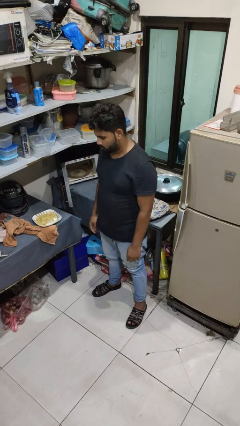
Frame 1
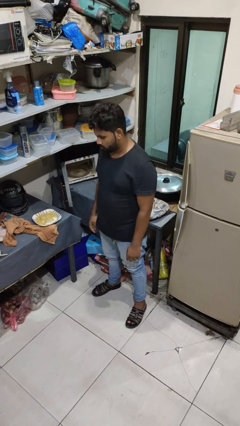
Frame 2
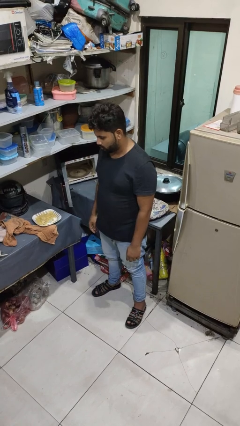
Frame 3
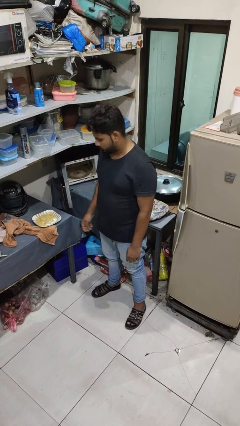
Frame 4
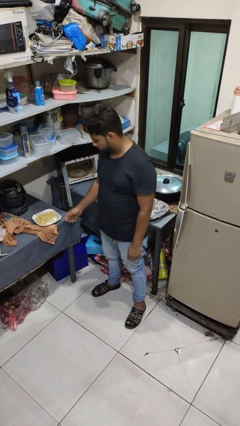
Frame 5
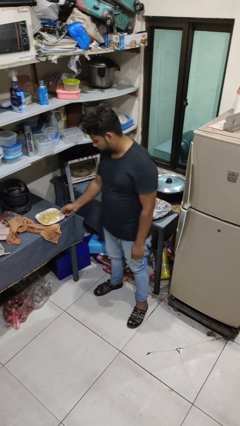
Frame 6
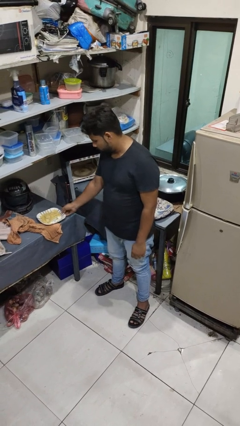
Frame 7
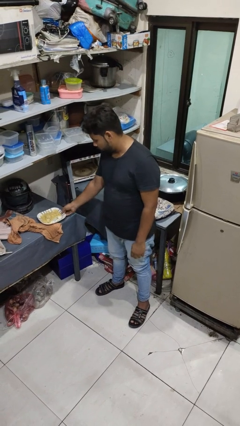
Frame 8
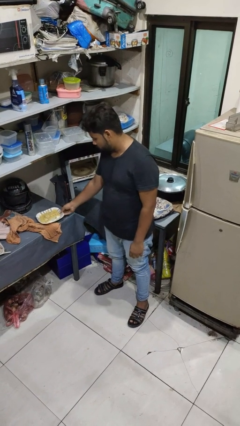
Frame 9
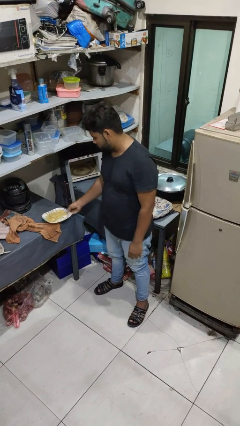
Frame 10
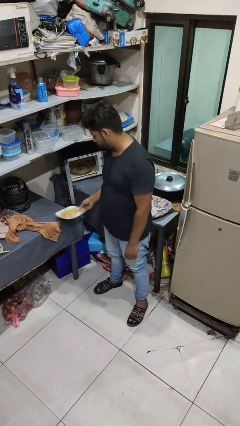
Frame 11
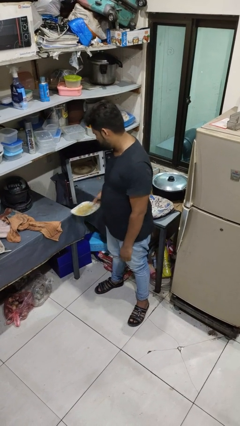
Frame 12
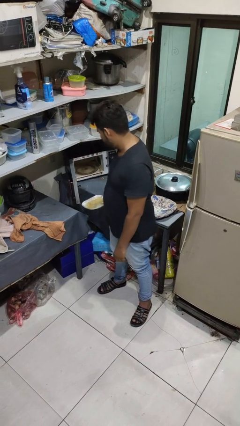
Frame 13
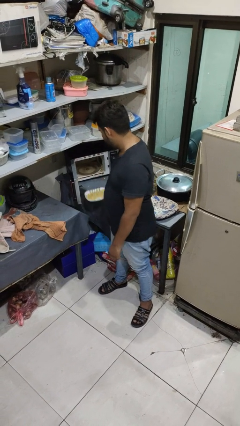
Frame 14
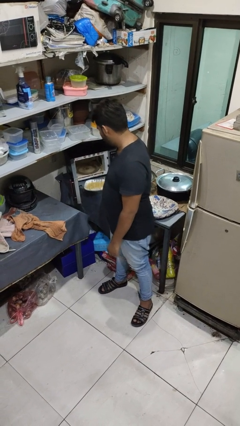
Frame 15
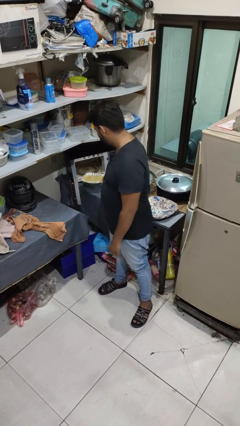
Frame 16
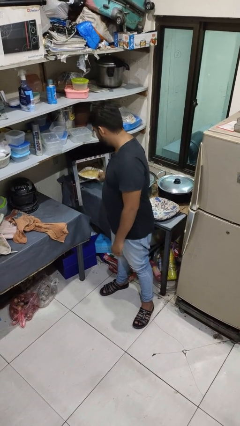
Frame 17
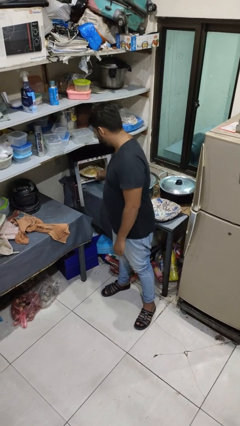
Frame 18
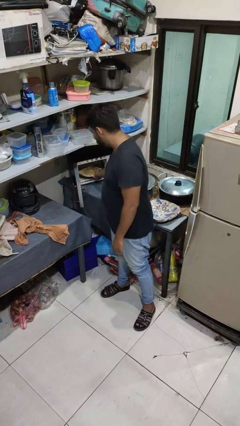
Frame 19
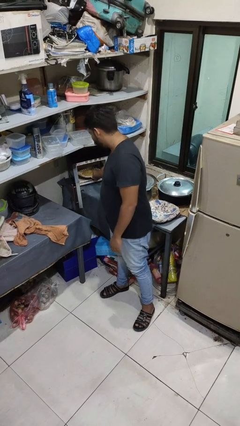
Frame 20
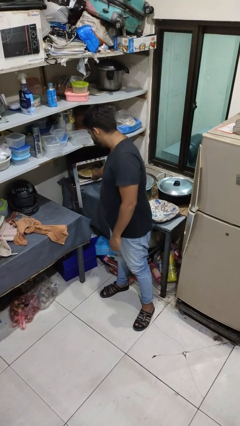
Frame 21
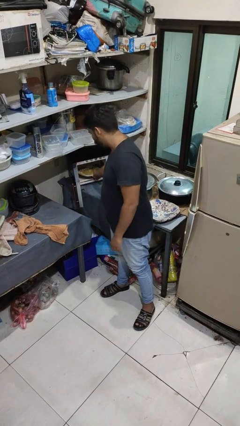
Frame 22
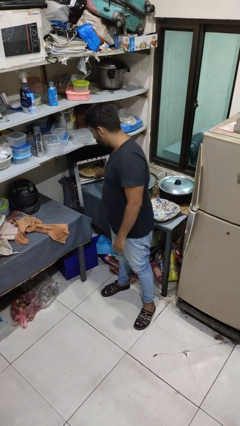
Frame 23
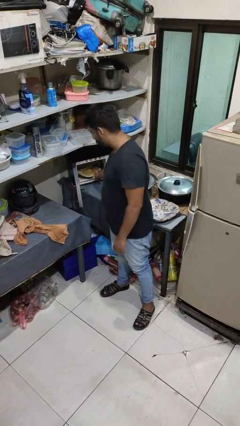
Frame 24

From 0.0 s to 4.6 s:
person puts object into microwave

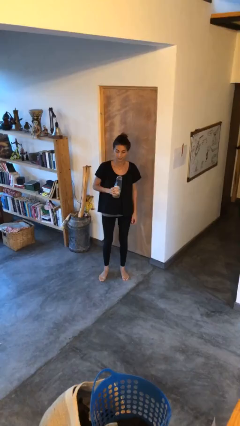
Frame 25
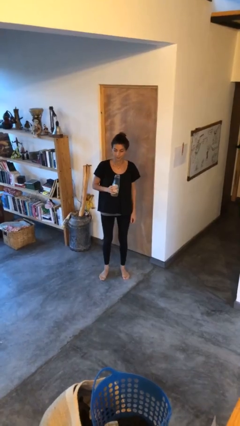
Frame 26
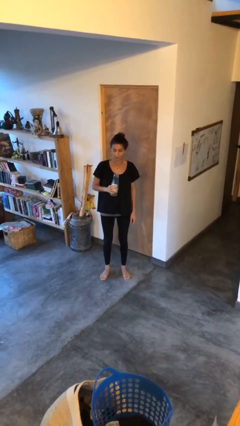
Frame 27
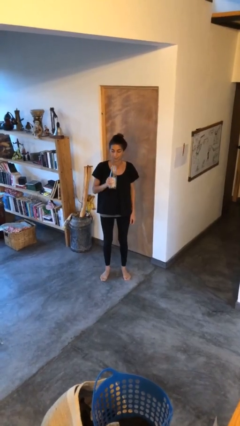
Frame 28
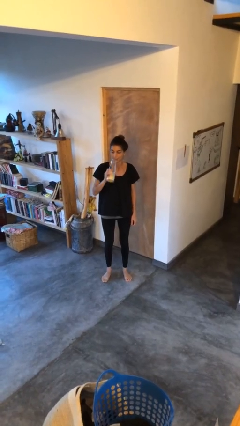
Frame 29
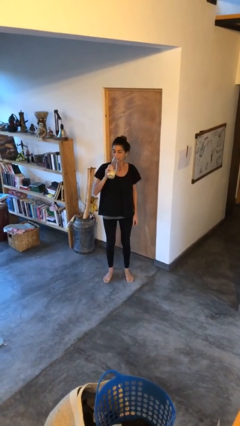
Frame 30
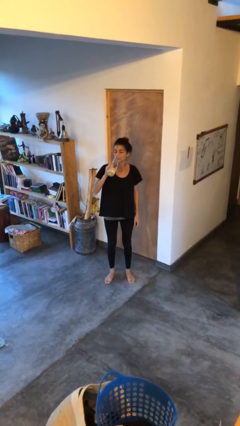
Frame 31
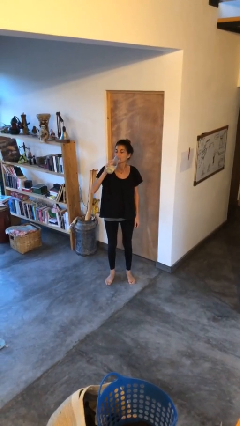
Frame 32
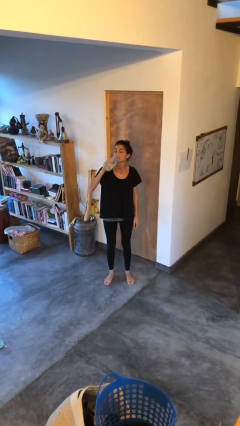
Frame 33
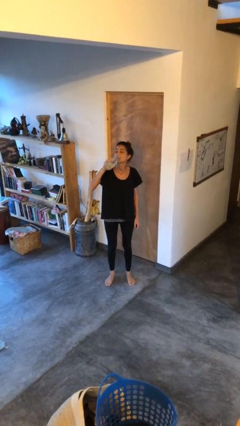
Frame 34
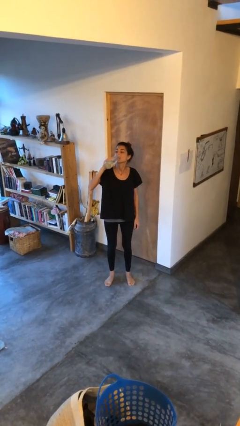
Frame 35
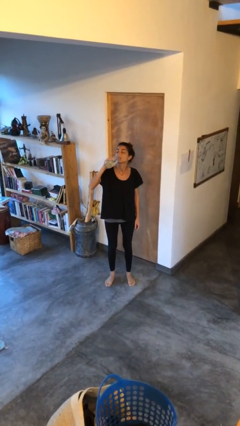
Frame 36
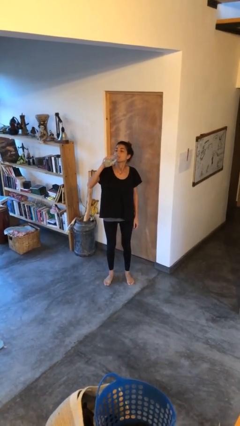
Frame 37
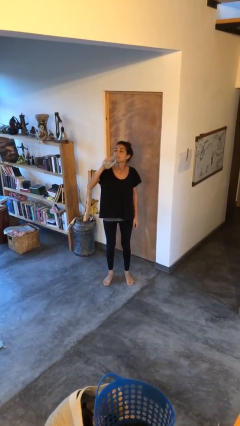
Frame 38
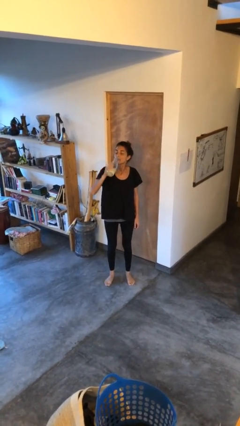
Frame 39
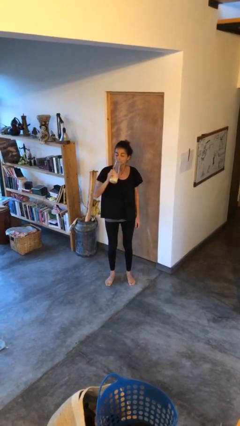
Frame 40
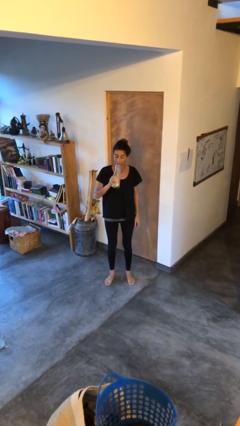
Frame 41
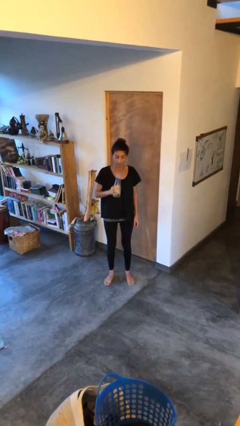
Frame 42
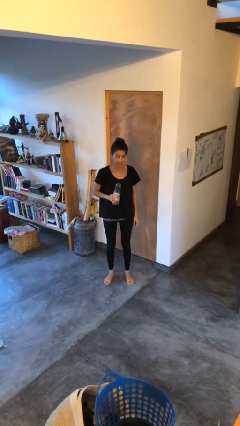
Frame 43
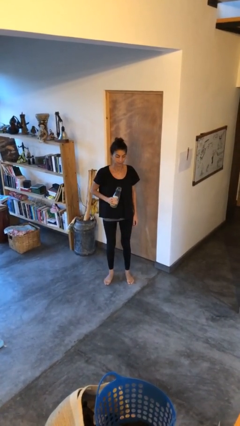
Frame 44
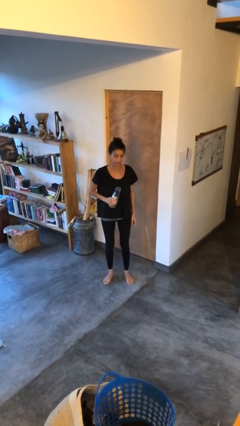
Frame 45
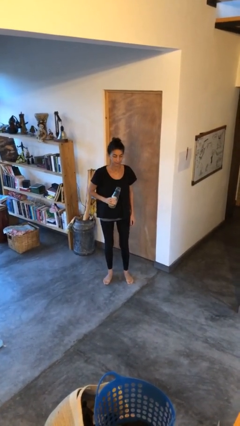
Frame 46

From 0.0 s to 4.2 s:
person drinks from bottle

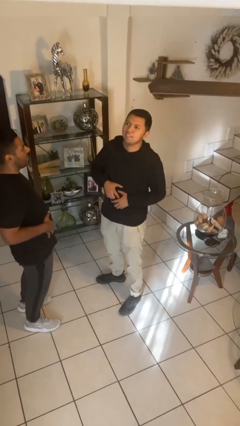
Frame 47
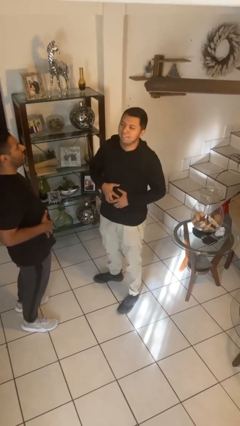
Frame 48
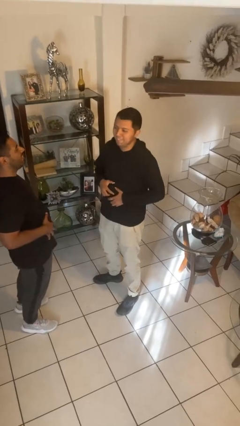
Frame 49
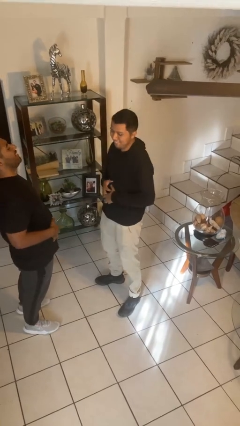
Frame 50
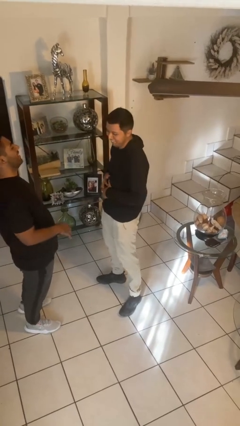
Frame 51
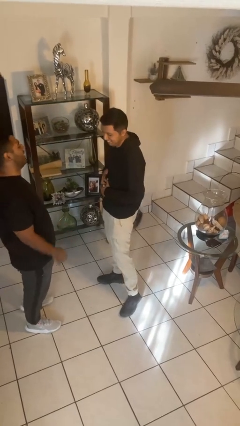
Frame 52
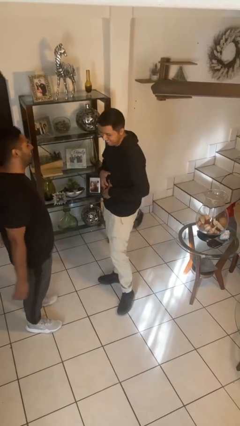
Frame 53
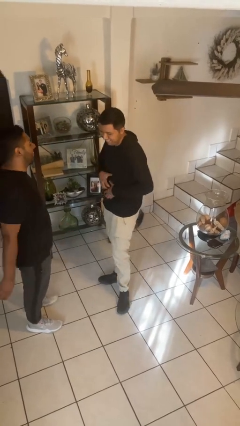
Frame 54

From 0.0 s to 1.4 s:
person laughs with person

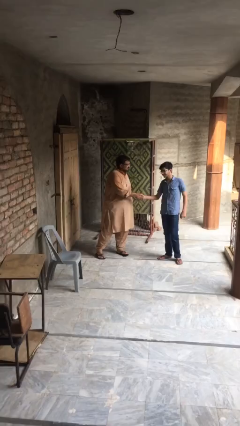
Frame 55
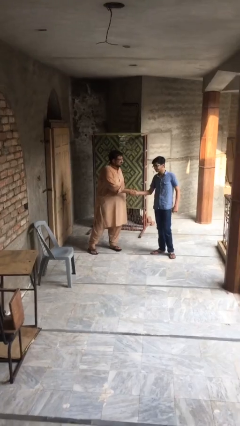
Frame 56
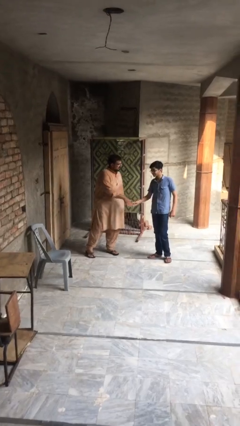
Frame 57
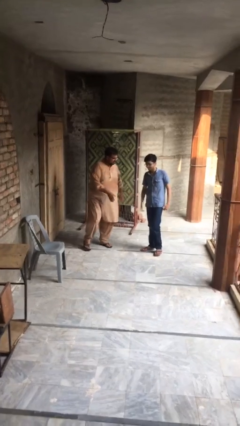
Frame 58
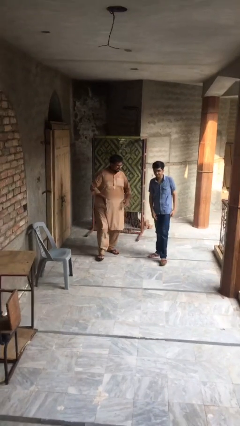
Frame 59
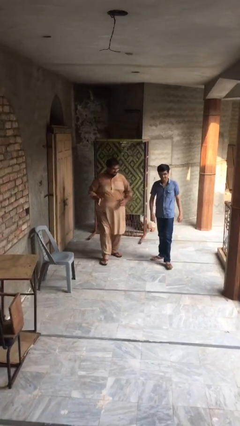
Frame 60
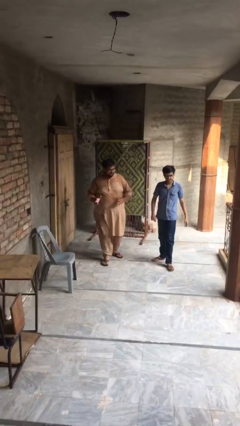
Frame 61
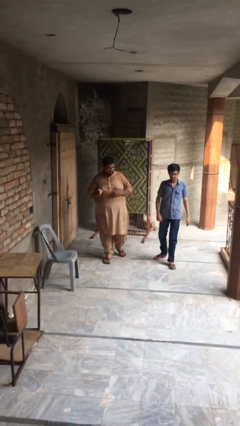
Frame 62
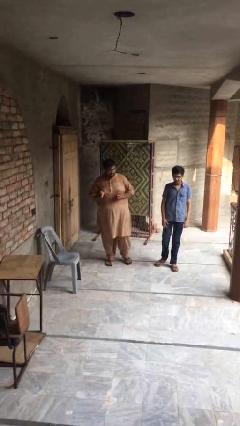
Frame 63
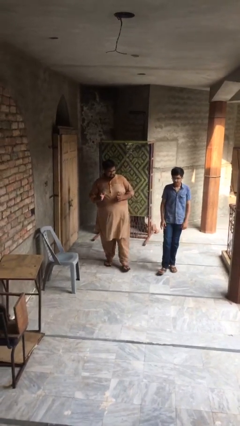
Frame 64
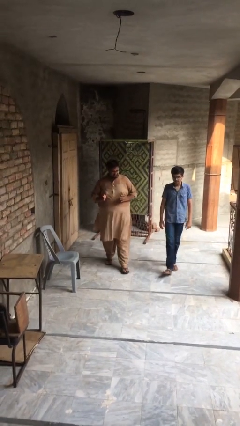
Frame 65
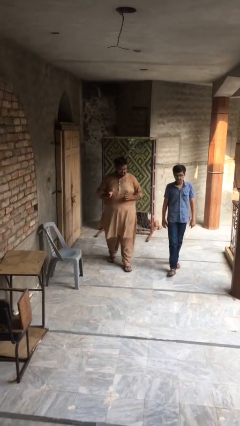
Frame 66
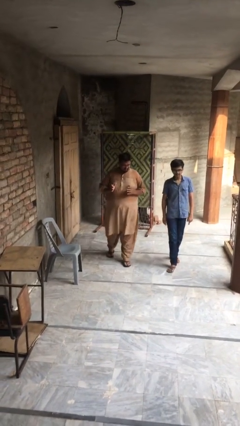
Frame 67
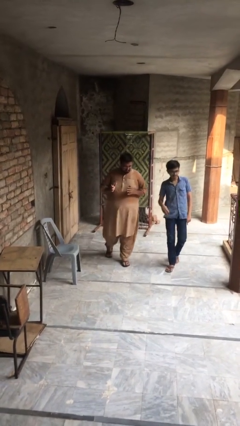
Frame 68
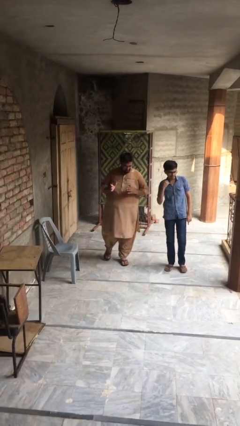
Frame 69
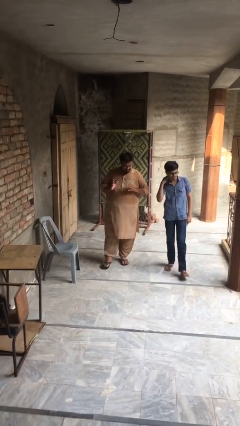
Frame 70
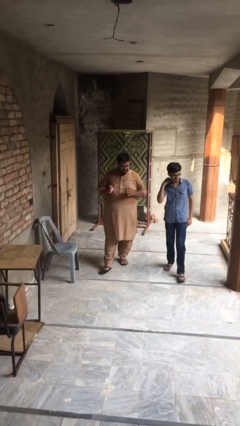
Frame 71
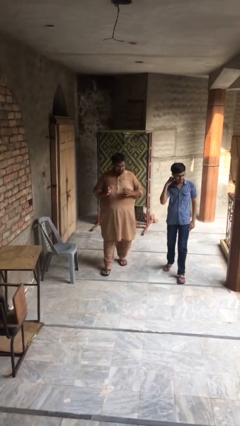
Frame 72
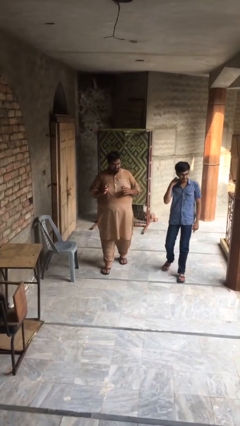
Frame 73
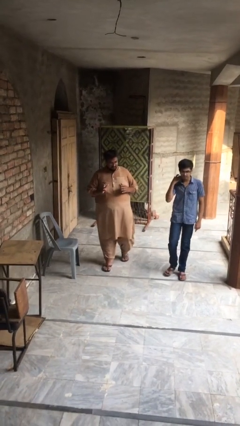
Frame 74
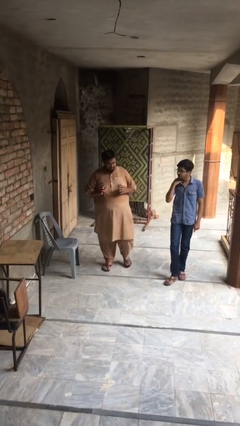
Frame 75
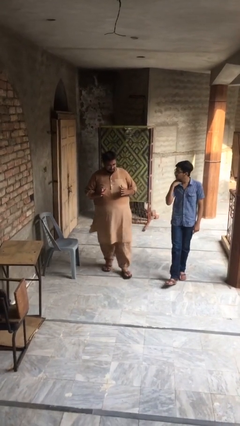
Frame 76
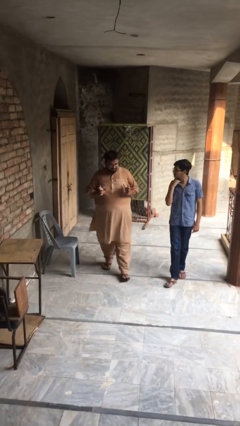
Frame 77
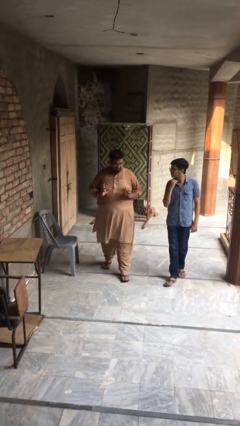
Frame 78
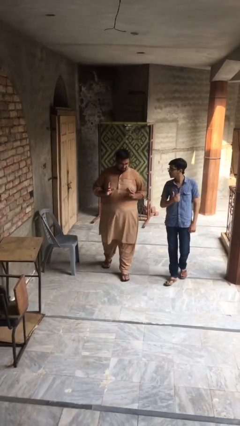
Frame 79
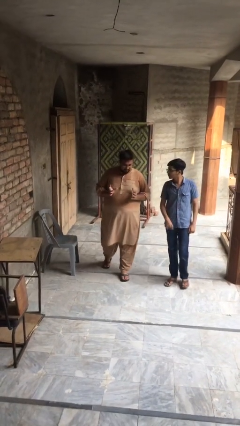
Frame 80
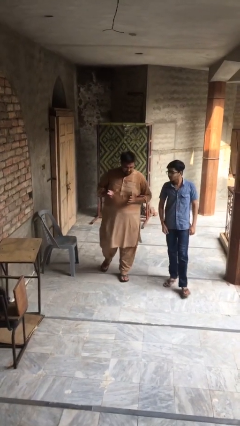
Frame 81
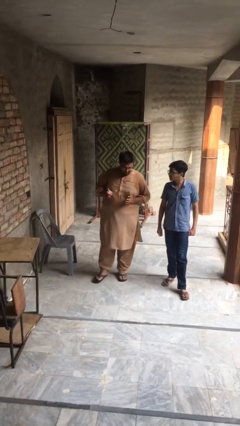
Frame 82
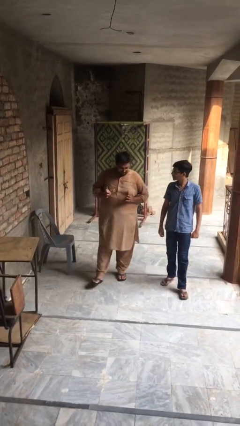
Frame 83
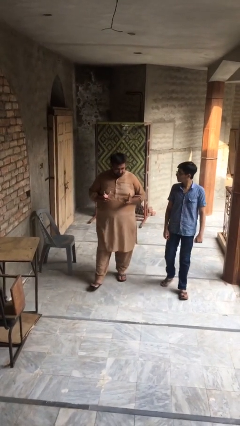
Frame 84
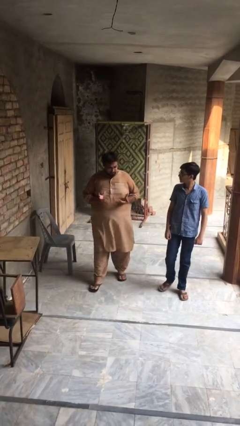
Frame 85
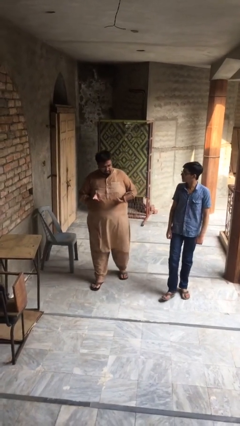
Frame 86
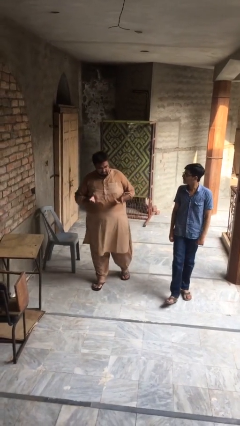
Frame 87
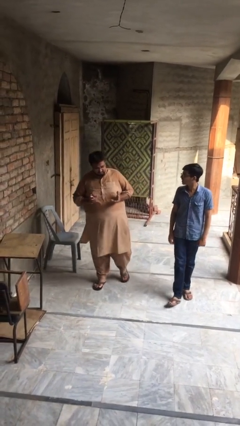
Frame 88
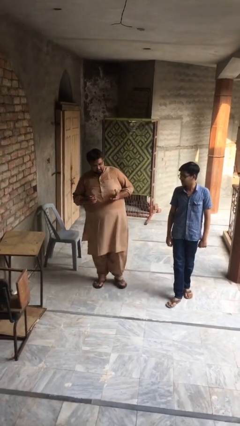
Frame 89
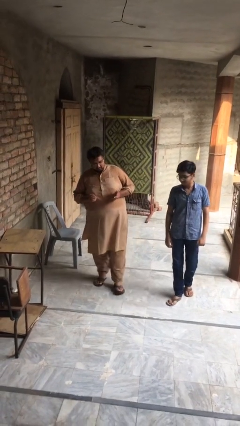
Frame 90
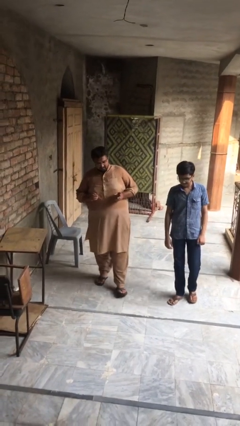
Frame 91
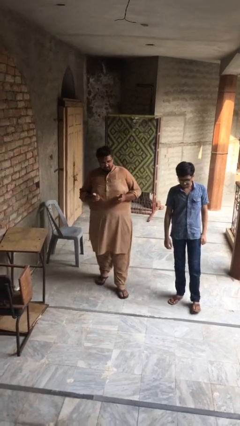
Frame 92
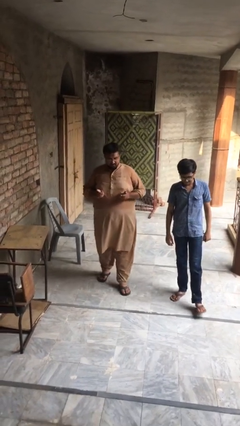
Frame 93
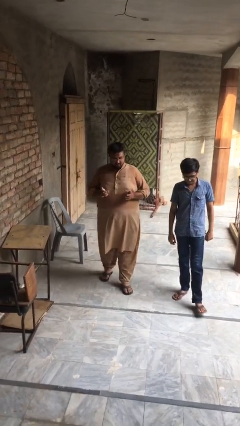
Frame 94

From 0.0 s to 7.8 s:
person talks to person

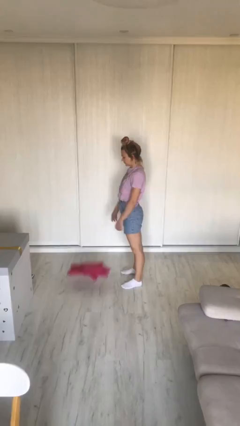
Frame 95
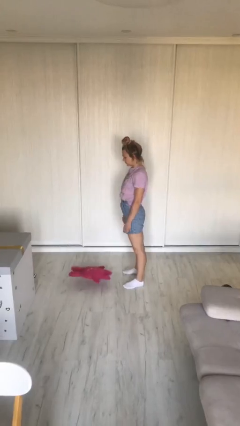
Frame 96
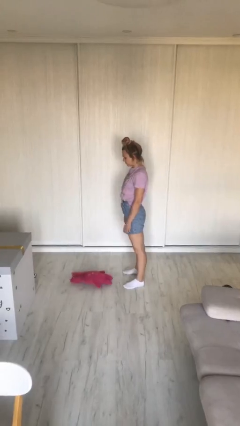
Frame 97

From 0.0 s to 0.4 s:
person drops object
